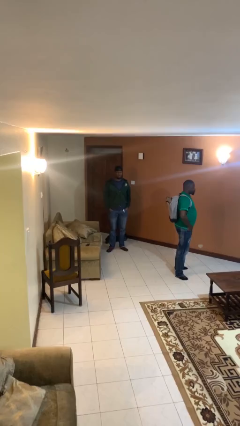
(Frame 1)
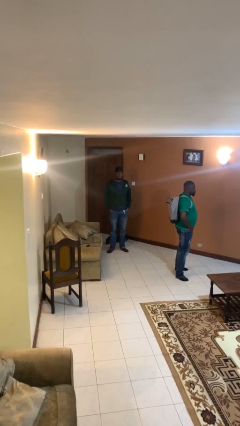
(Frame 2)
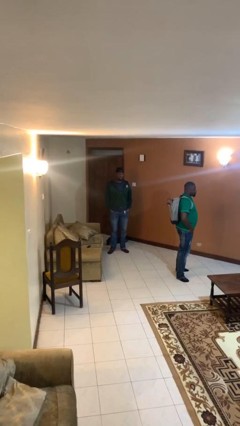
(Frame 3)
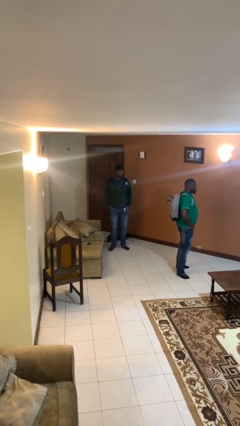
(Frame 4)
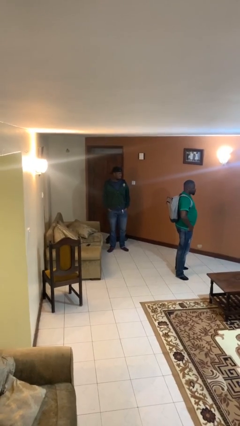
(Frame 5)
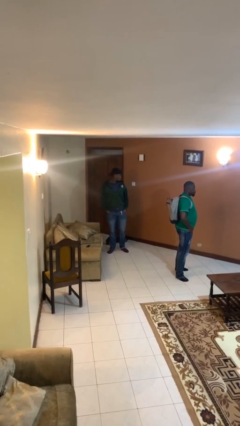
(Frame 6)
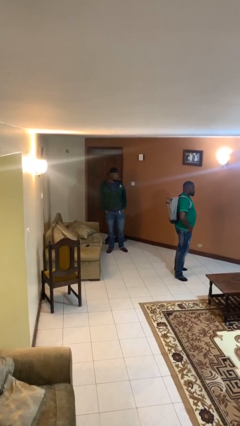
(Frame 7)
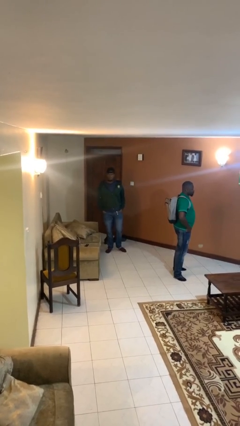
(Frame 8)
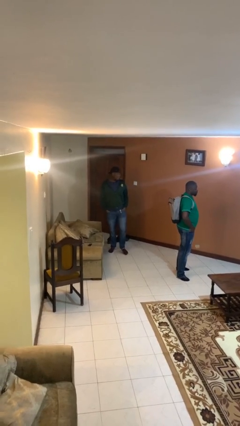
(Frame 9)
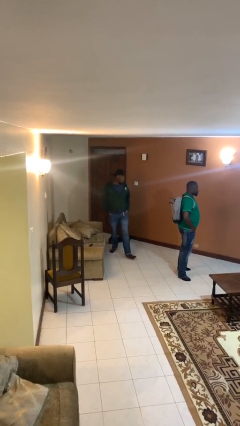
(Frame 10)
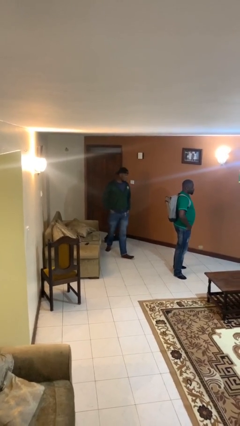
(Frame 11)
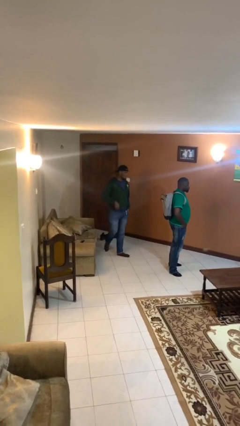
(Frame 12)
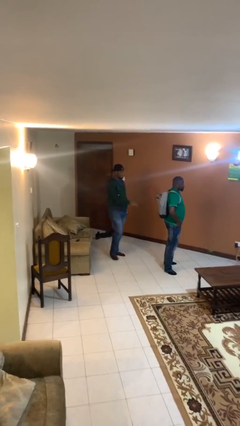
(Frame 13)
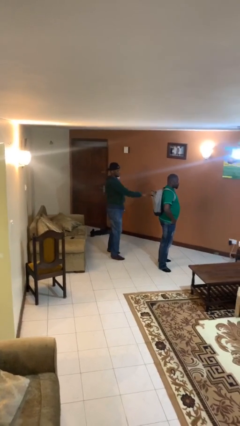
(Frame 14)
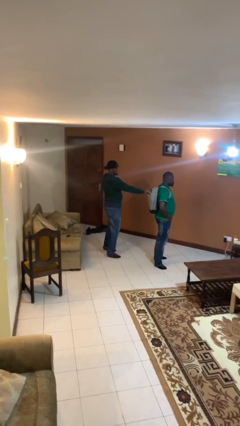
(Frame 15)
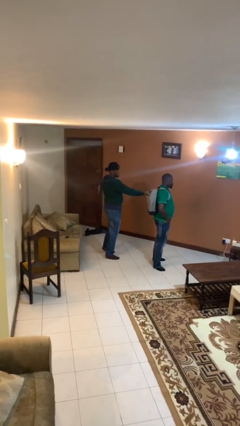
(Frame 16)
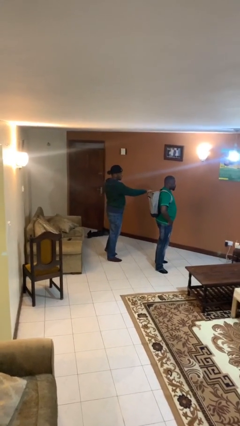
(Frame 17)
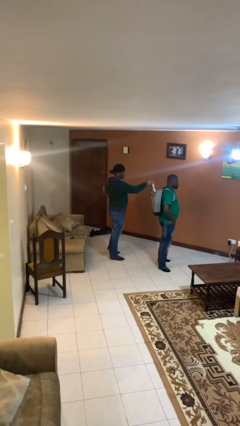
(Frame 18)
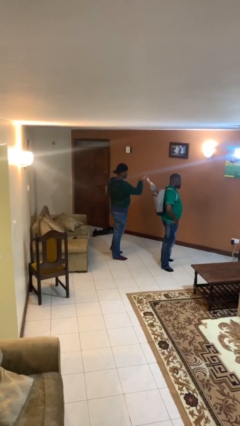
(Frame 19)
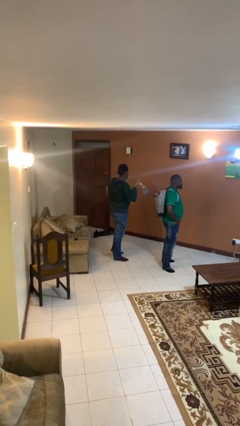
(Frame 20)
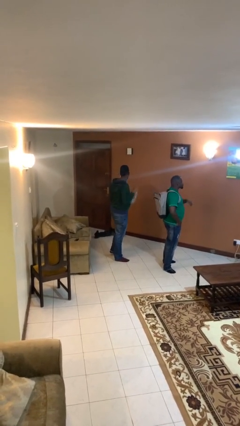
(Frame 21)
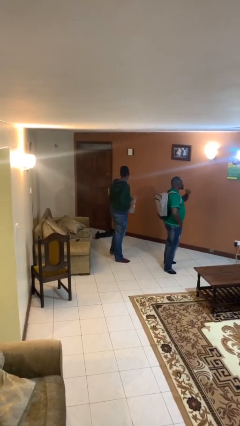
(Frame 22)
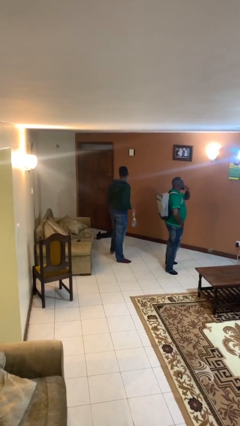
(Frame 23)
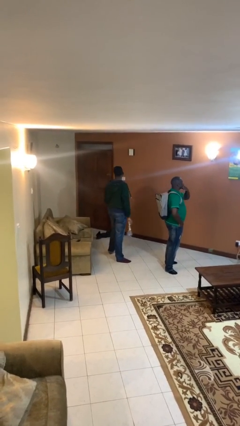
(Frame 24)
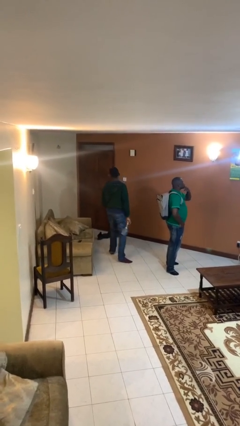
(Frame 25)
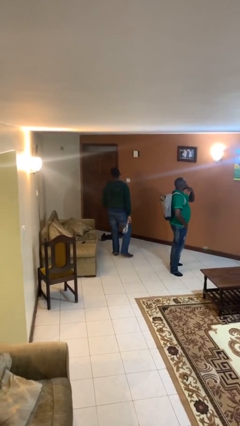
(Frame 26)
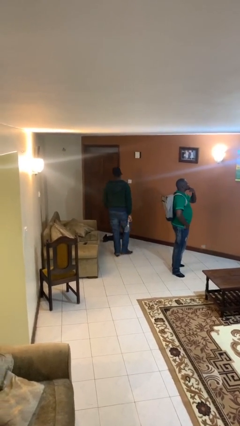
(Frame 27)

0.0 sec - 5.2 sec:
person steals object from person

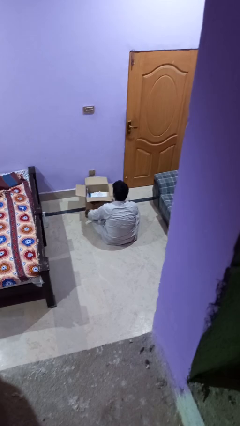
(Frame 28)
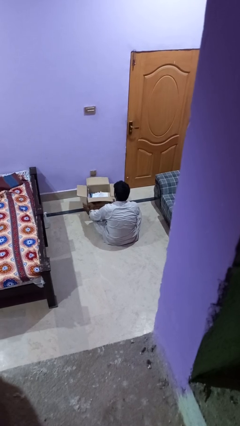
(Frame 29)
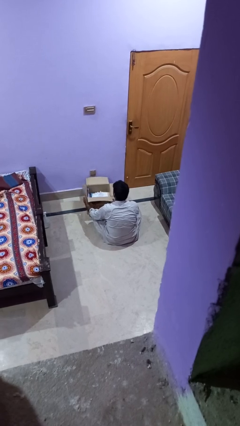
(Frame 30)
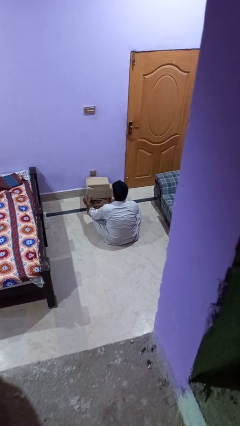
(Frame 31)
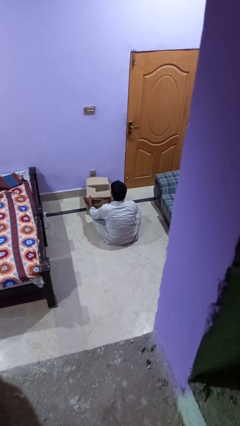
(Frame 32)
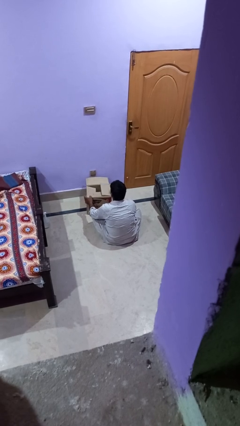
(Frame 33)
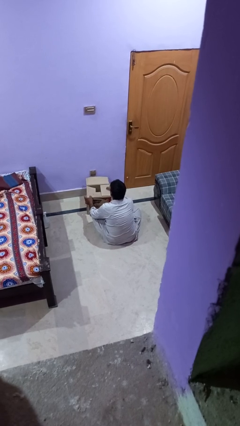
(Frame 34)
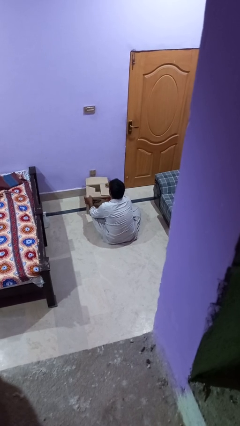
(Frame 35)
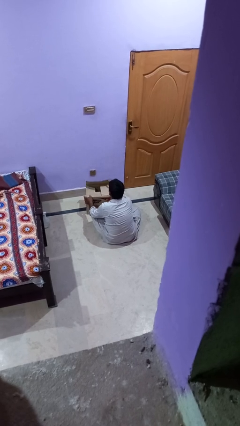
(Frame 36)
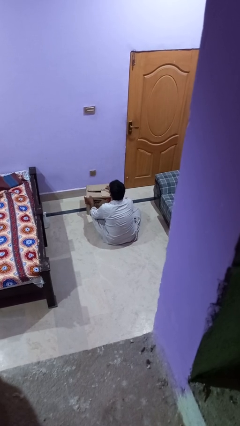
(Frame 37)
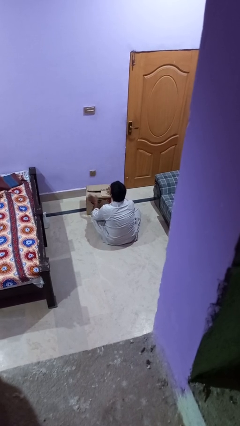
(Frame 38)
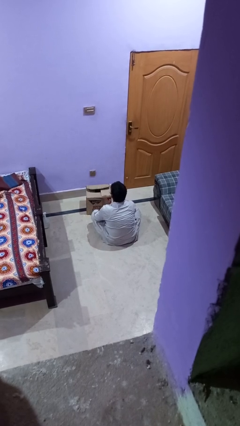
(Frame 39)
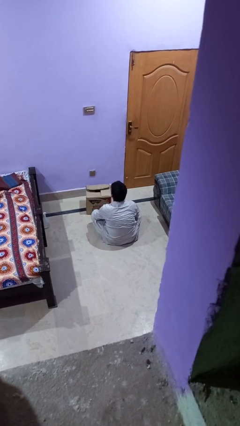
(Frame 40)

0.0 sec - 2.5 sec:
person closes box

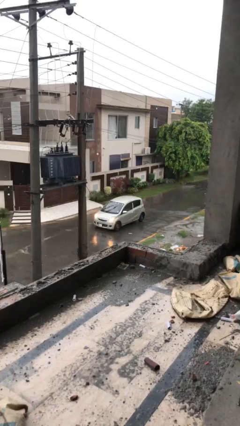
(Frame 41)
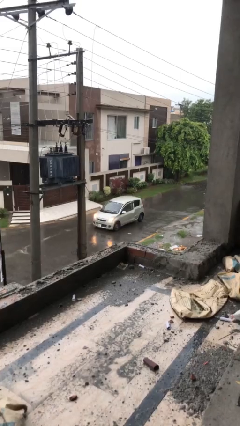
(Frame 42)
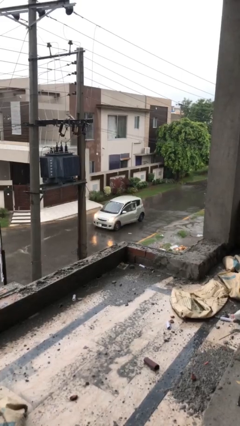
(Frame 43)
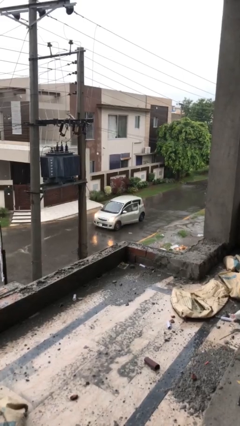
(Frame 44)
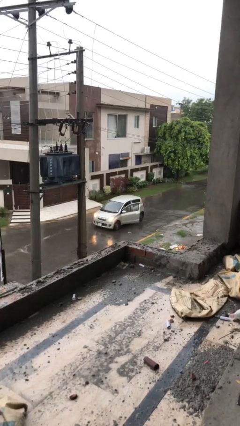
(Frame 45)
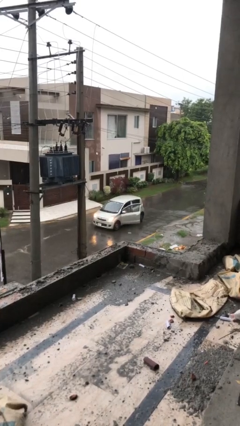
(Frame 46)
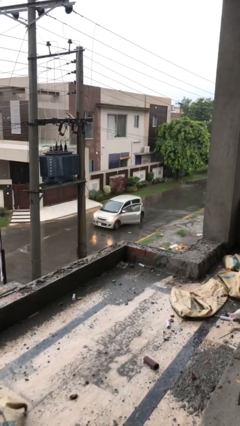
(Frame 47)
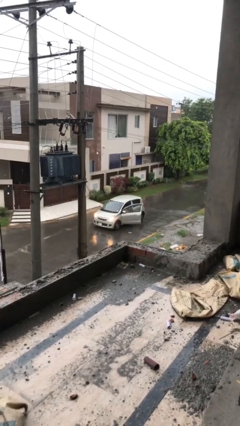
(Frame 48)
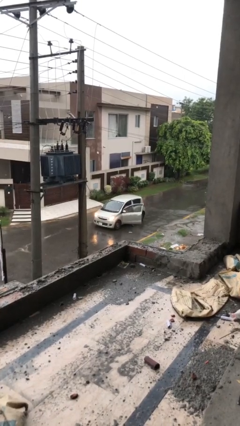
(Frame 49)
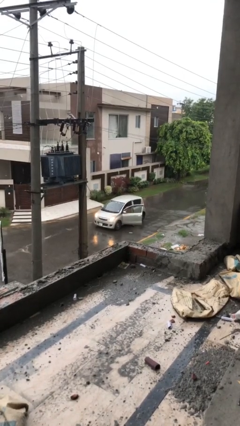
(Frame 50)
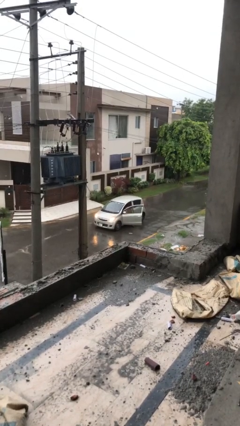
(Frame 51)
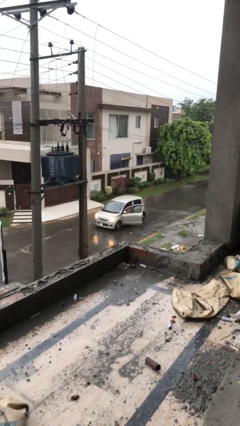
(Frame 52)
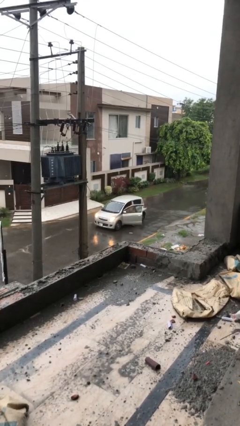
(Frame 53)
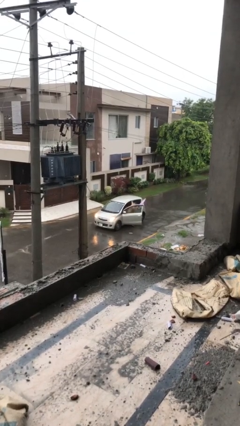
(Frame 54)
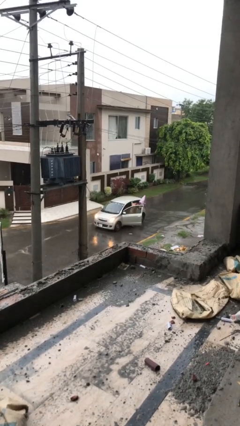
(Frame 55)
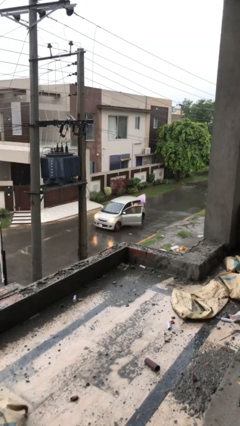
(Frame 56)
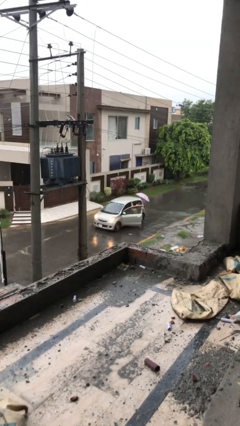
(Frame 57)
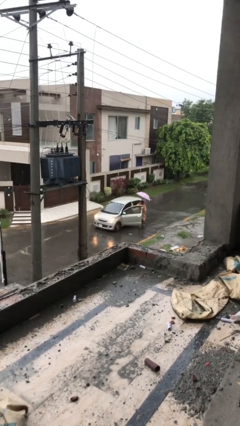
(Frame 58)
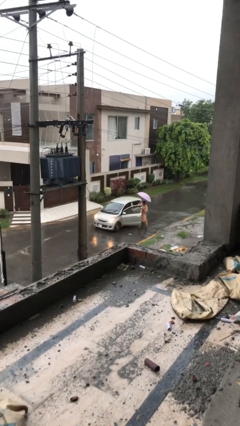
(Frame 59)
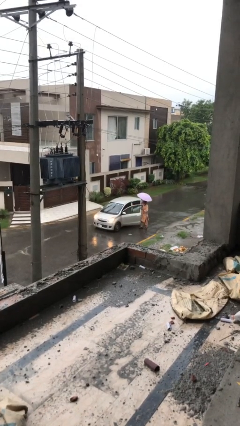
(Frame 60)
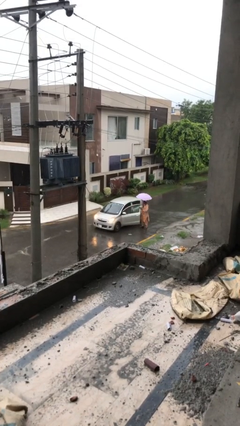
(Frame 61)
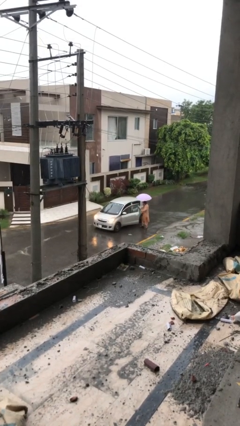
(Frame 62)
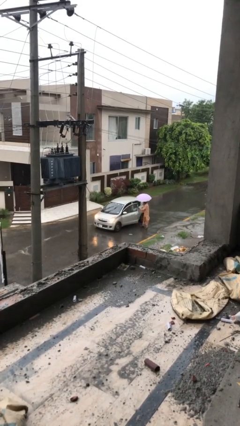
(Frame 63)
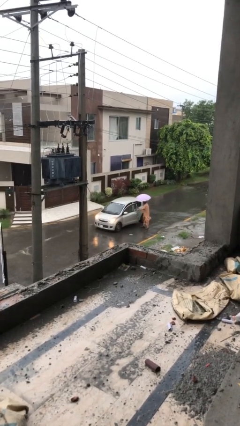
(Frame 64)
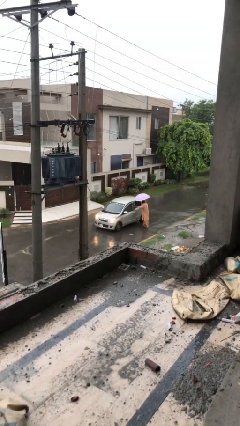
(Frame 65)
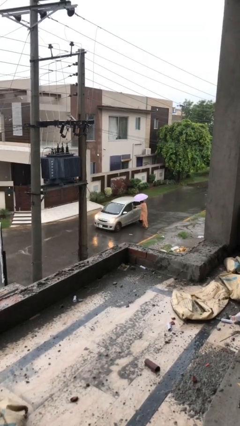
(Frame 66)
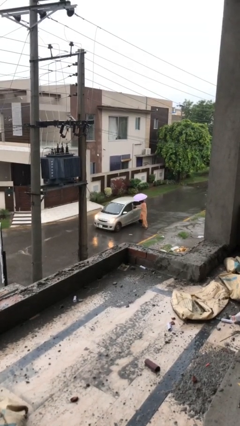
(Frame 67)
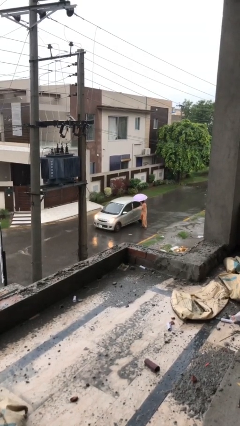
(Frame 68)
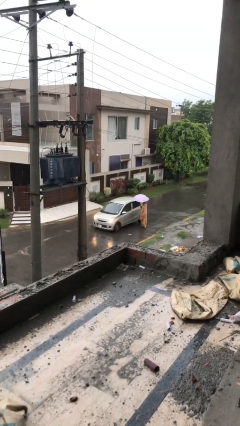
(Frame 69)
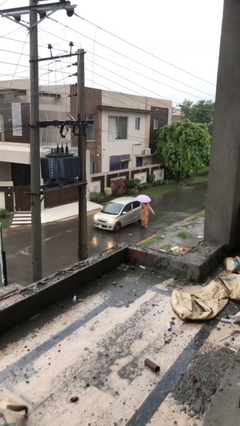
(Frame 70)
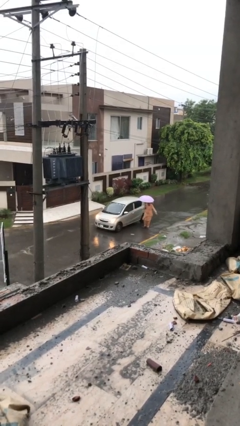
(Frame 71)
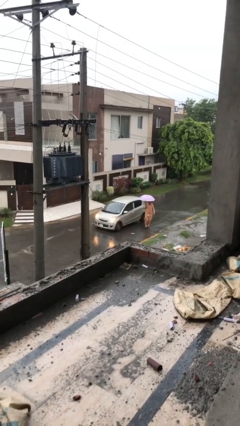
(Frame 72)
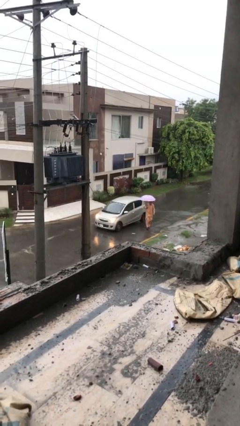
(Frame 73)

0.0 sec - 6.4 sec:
car drops off person

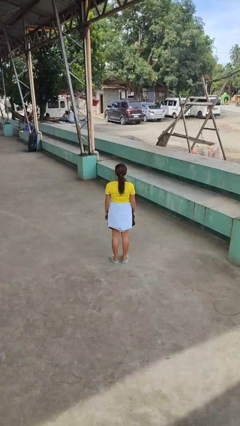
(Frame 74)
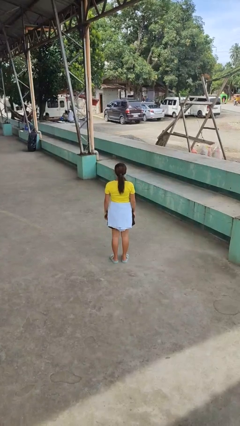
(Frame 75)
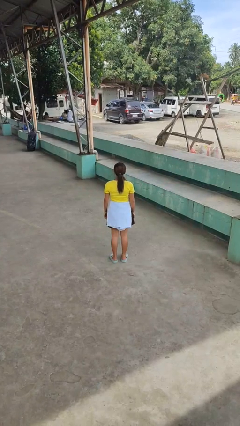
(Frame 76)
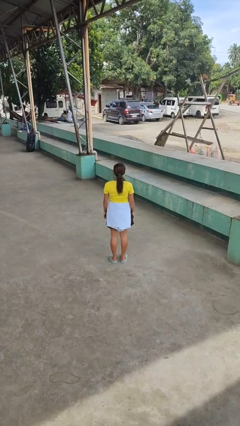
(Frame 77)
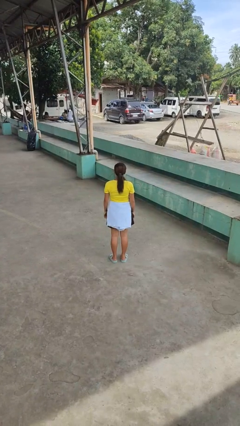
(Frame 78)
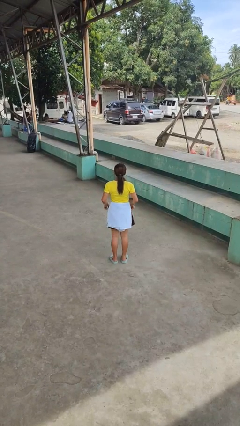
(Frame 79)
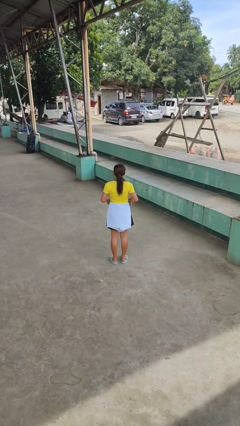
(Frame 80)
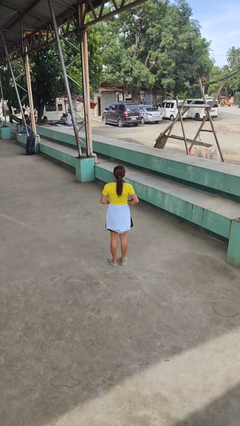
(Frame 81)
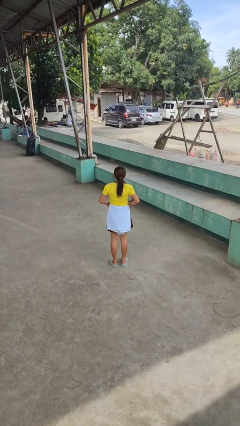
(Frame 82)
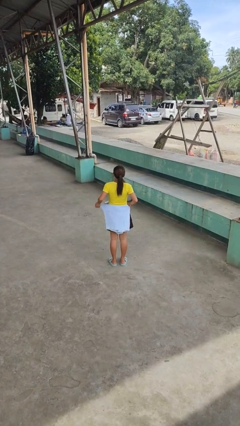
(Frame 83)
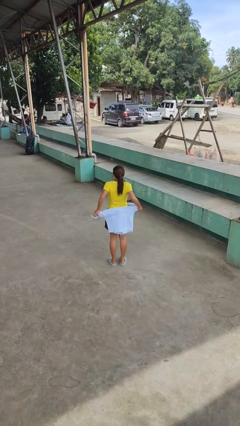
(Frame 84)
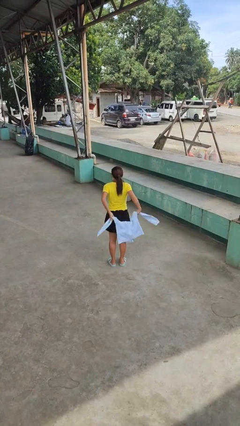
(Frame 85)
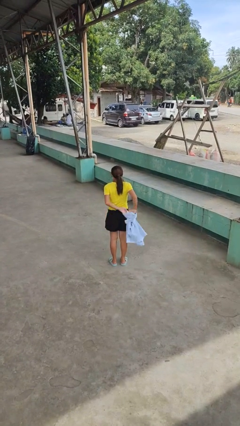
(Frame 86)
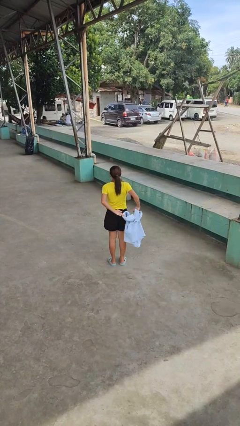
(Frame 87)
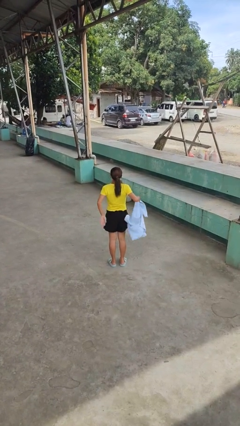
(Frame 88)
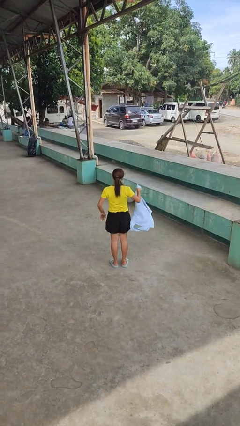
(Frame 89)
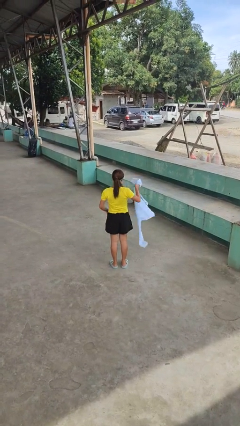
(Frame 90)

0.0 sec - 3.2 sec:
person unties jacket around waist

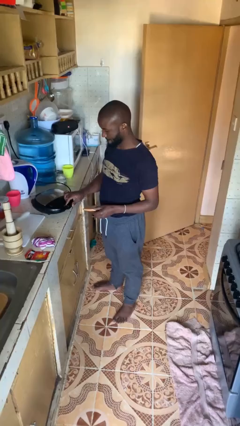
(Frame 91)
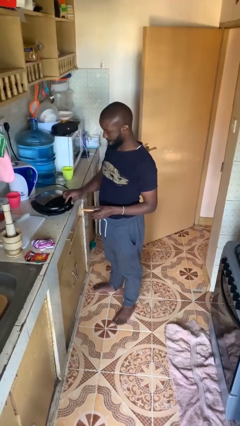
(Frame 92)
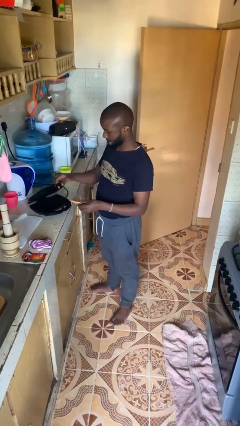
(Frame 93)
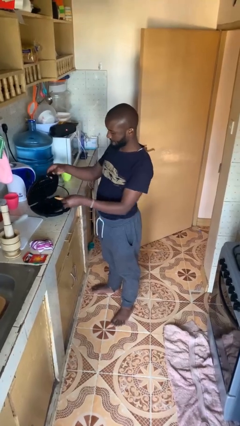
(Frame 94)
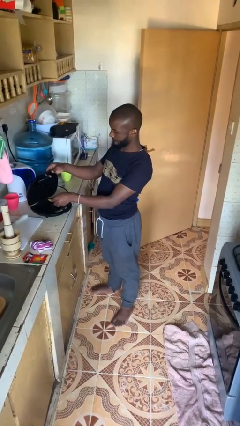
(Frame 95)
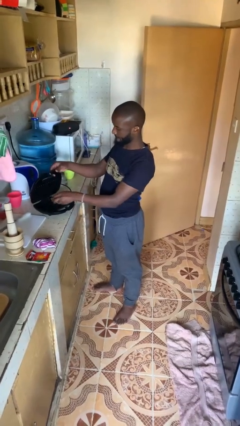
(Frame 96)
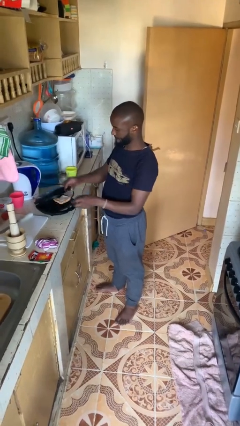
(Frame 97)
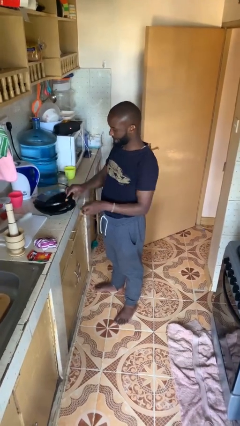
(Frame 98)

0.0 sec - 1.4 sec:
person puts object into toaster
